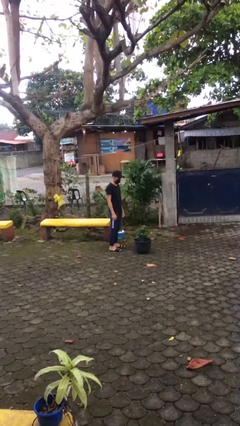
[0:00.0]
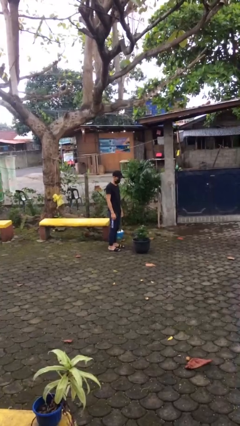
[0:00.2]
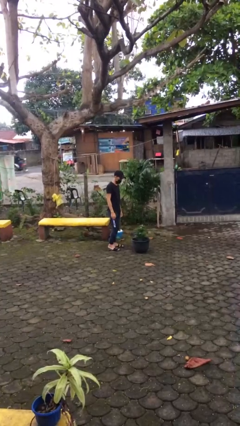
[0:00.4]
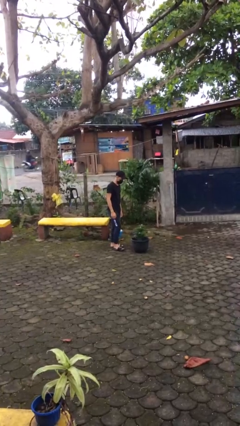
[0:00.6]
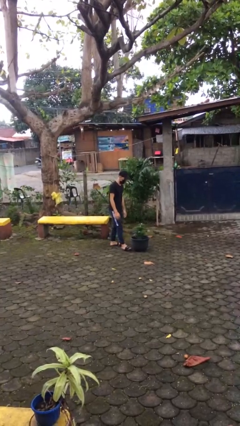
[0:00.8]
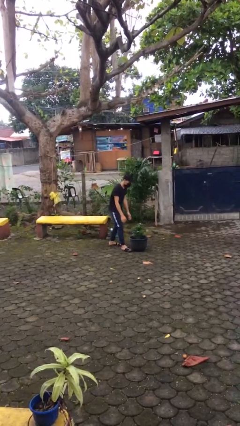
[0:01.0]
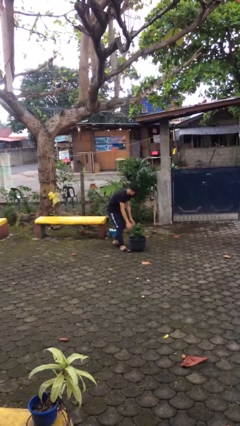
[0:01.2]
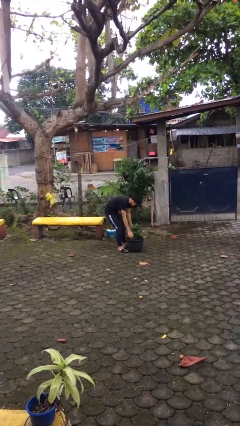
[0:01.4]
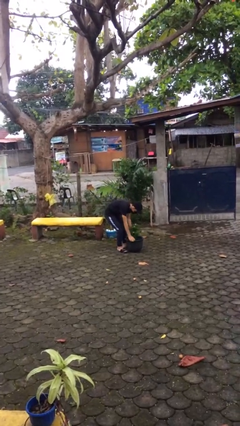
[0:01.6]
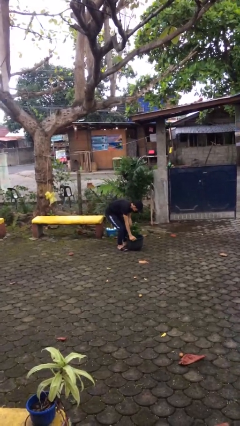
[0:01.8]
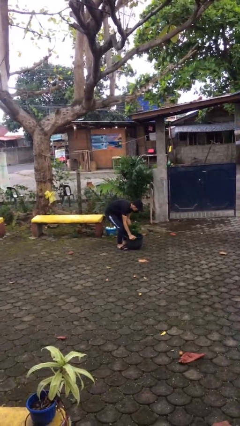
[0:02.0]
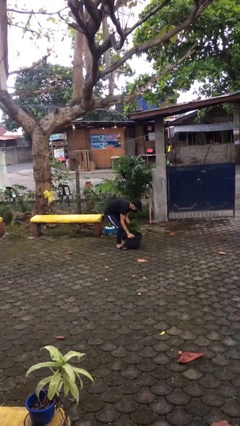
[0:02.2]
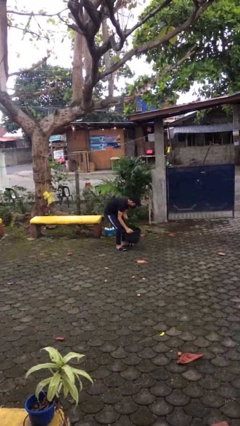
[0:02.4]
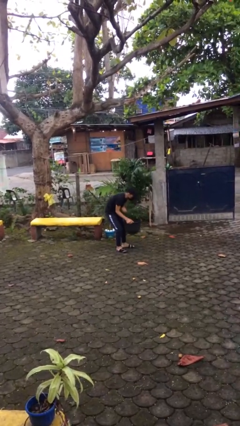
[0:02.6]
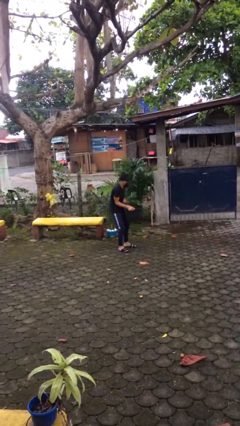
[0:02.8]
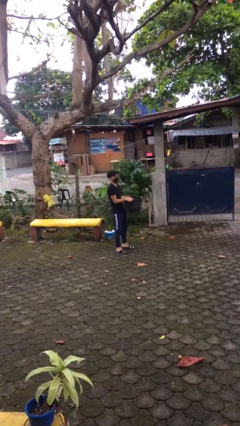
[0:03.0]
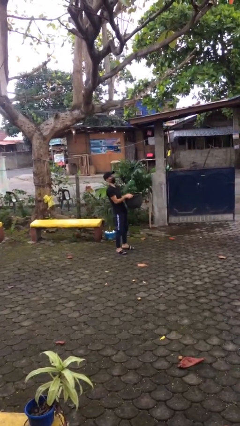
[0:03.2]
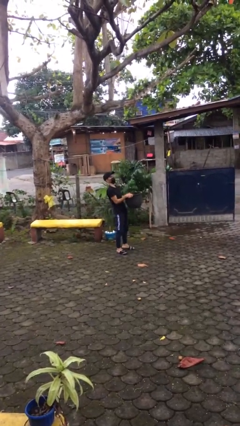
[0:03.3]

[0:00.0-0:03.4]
person picks up object from floor

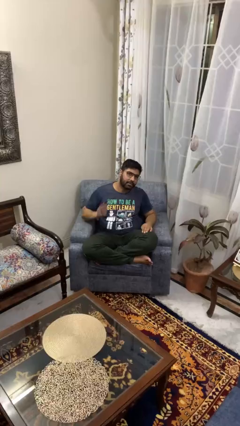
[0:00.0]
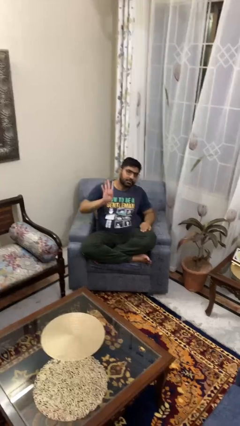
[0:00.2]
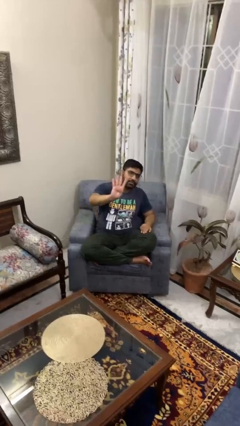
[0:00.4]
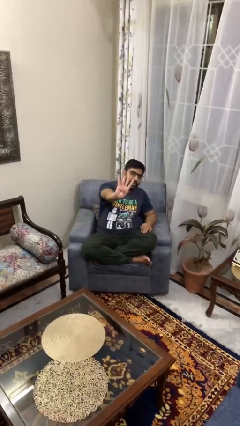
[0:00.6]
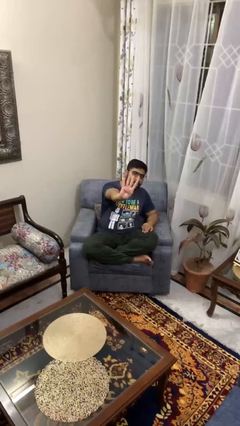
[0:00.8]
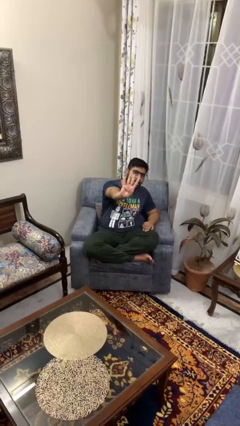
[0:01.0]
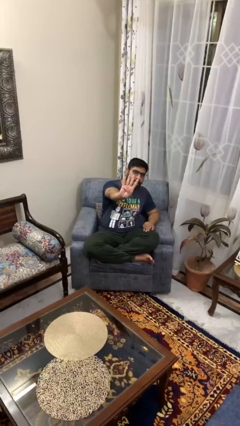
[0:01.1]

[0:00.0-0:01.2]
person gestures number four

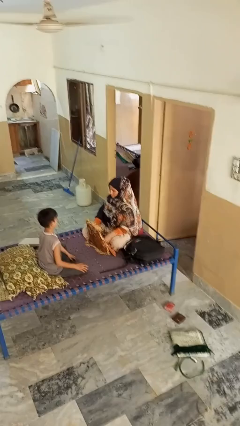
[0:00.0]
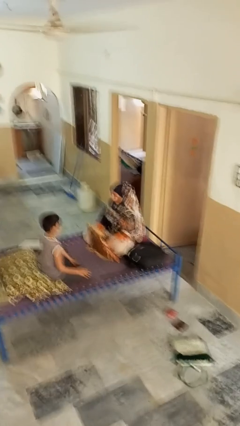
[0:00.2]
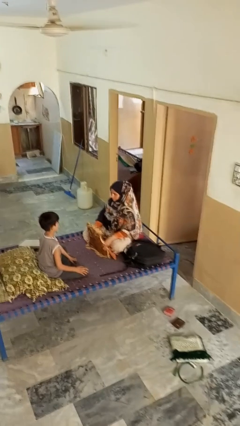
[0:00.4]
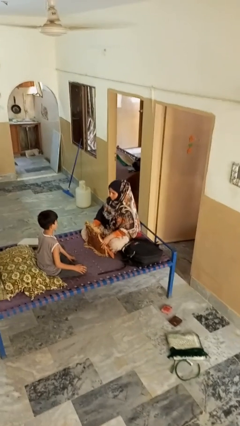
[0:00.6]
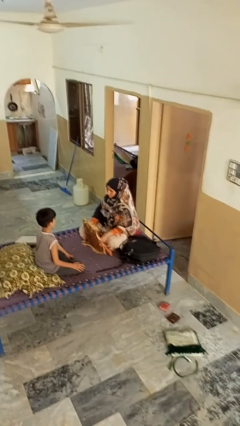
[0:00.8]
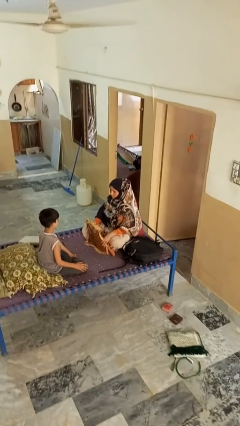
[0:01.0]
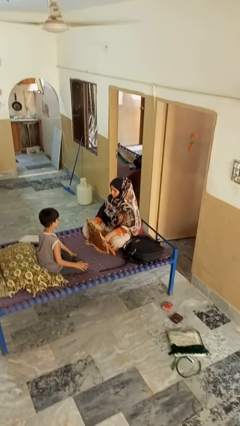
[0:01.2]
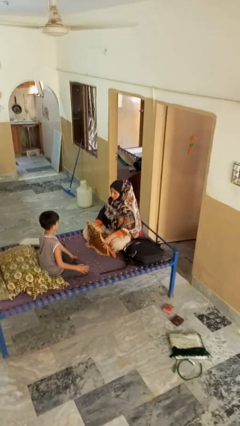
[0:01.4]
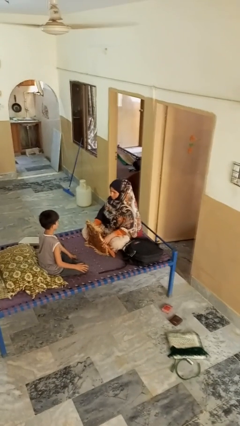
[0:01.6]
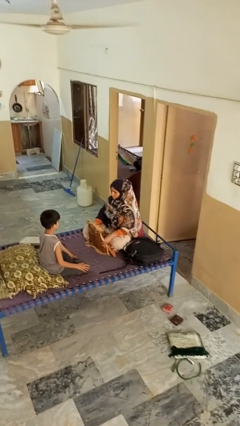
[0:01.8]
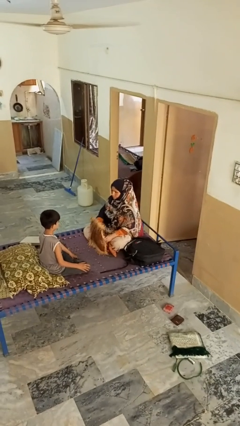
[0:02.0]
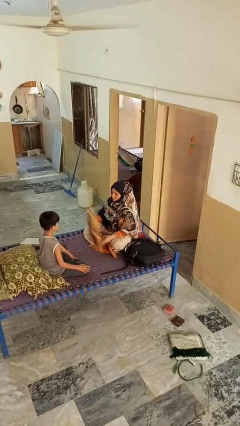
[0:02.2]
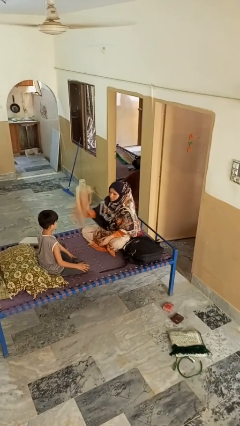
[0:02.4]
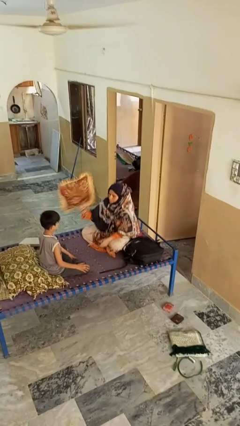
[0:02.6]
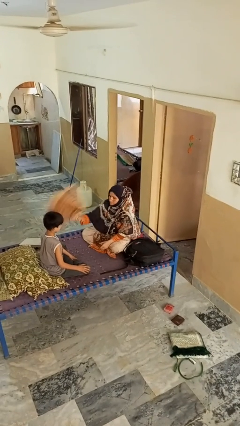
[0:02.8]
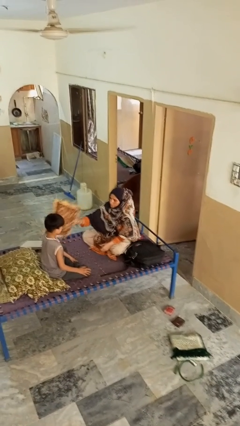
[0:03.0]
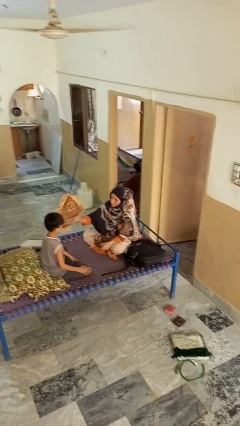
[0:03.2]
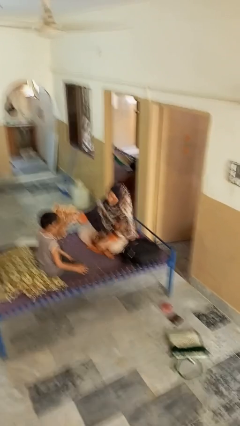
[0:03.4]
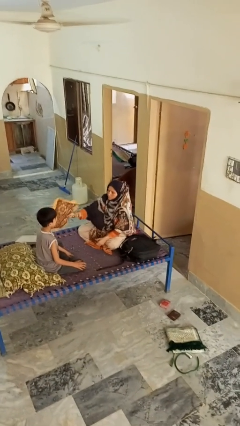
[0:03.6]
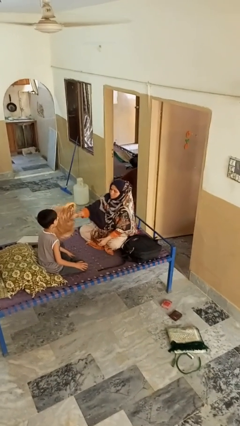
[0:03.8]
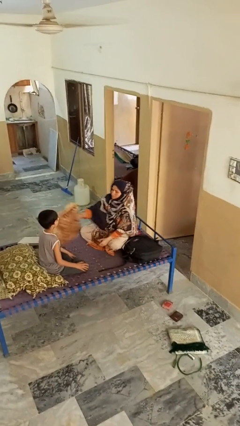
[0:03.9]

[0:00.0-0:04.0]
person hits person with pillow

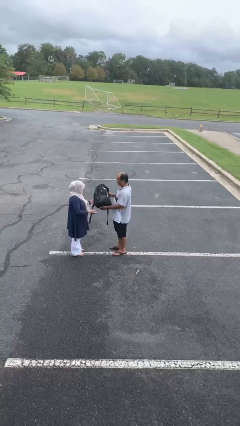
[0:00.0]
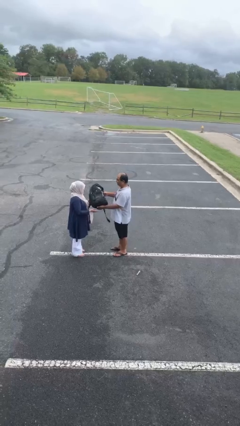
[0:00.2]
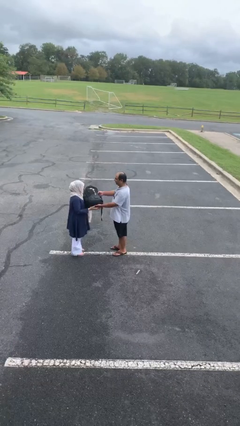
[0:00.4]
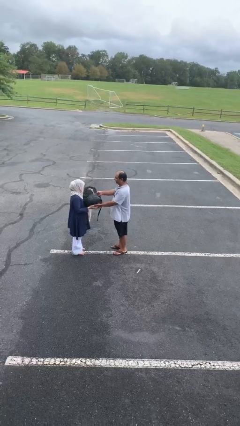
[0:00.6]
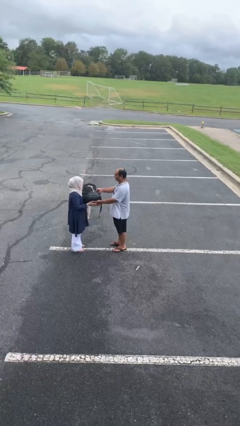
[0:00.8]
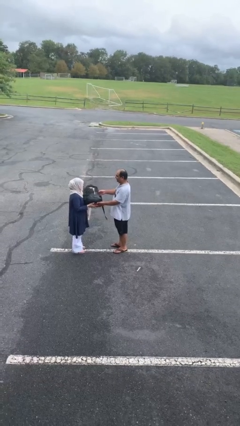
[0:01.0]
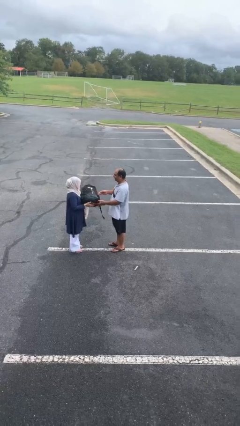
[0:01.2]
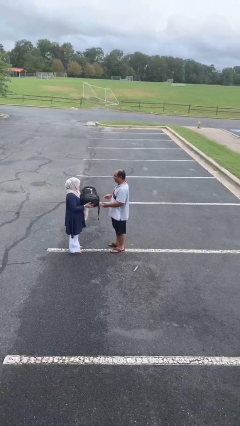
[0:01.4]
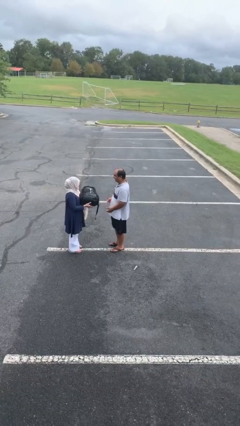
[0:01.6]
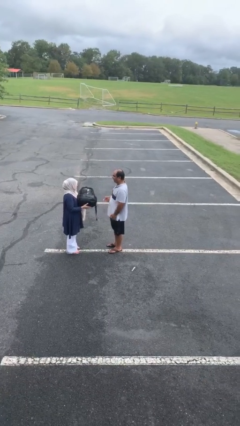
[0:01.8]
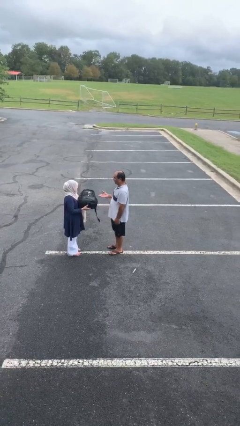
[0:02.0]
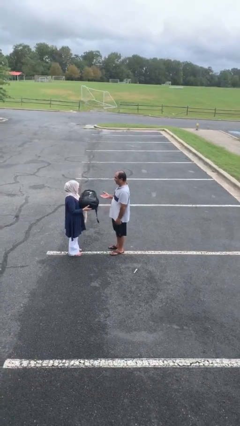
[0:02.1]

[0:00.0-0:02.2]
person transfers object to person

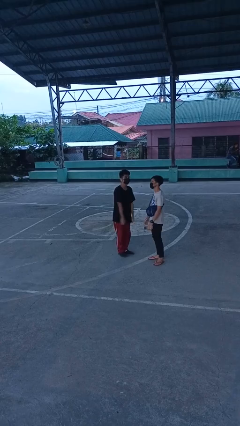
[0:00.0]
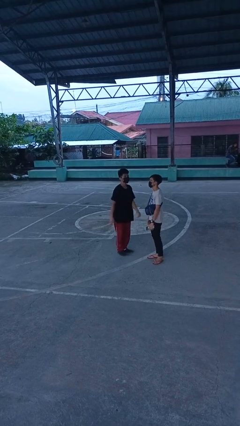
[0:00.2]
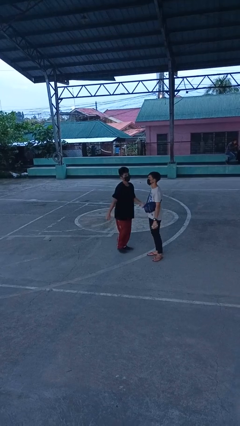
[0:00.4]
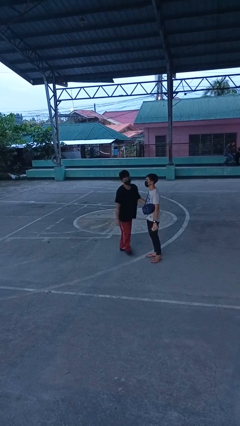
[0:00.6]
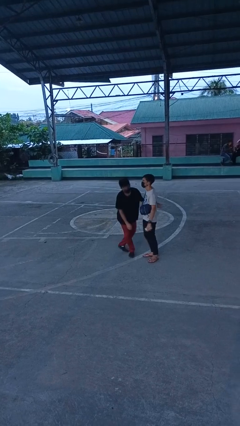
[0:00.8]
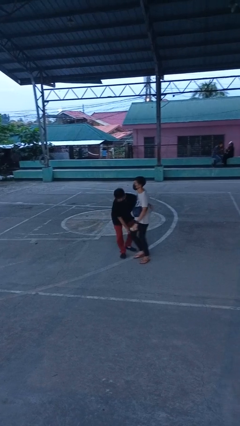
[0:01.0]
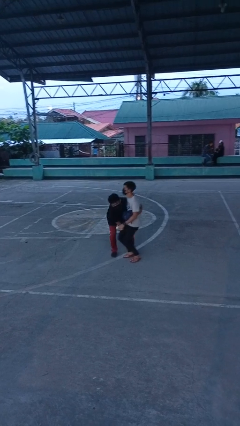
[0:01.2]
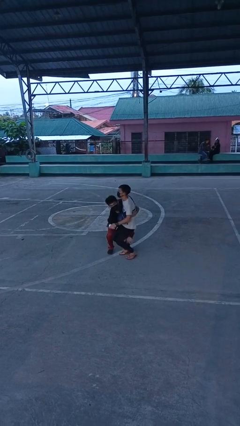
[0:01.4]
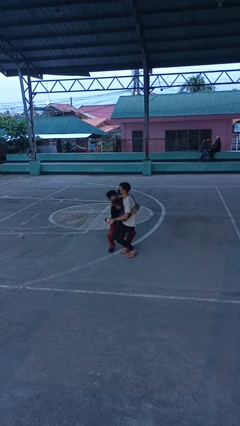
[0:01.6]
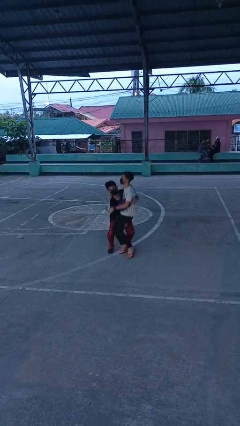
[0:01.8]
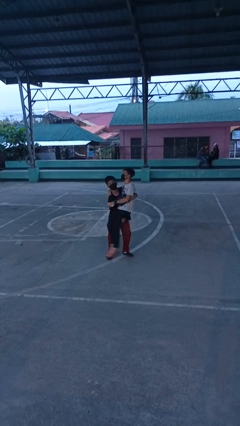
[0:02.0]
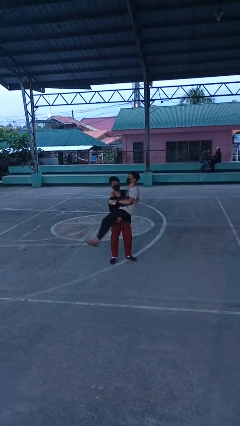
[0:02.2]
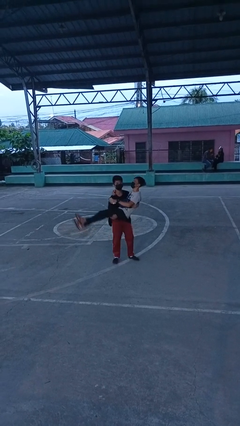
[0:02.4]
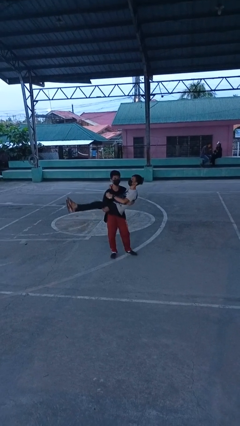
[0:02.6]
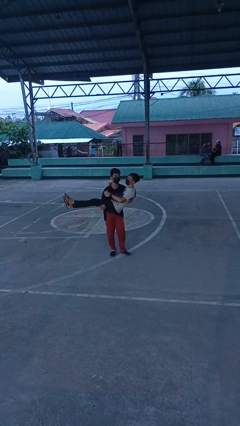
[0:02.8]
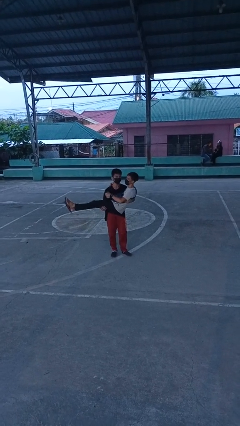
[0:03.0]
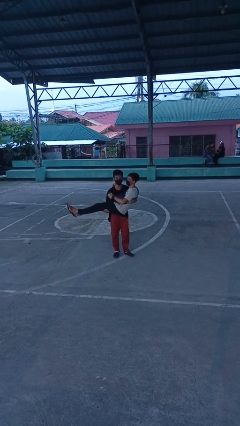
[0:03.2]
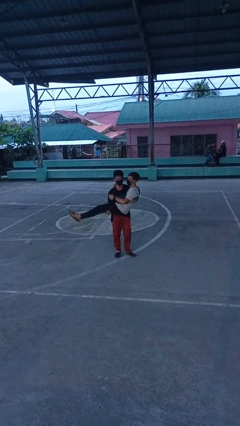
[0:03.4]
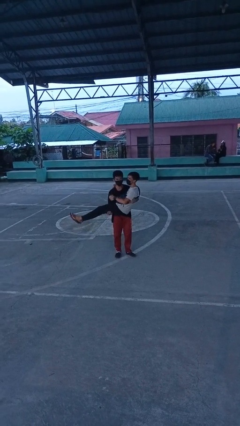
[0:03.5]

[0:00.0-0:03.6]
person picks up person

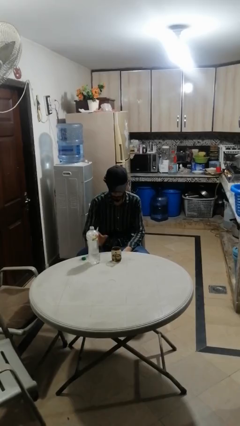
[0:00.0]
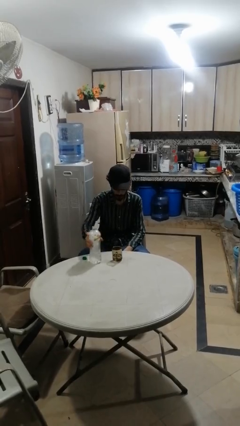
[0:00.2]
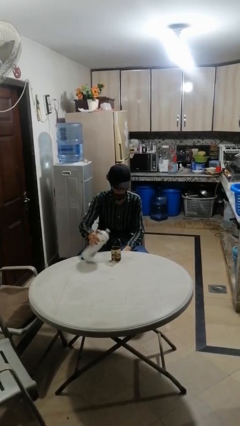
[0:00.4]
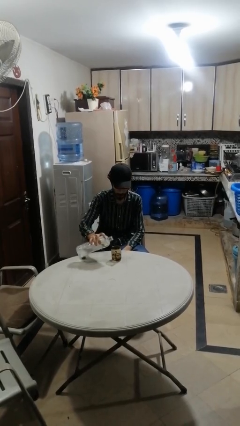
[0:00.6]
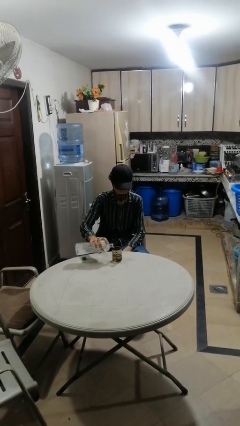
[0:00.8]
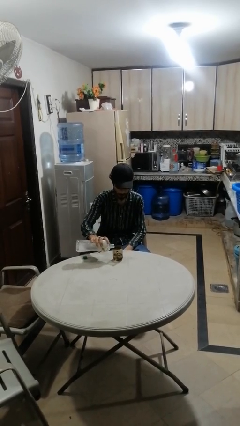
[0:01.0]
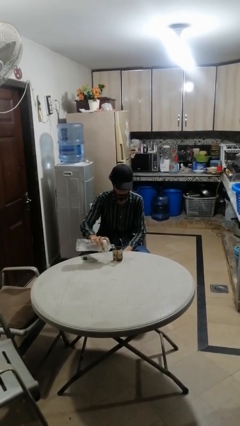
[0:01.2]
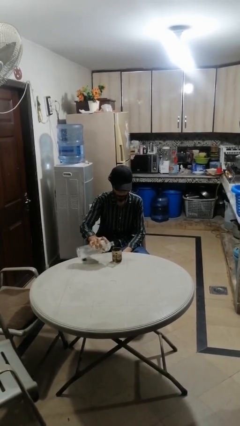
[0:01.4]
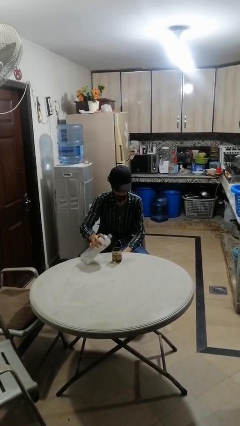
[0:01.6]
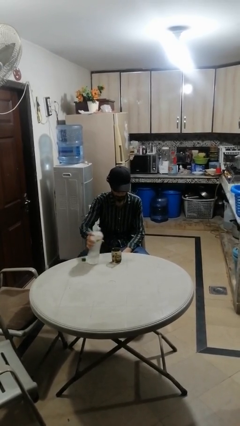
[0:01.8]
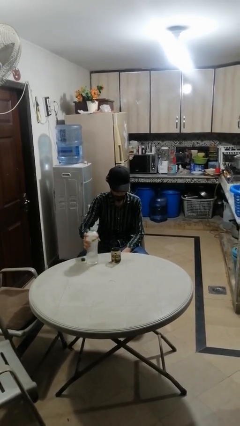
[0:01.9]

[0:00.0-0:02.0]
person pours liquid into cup

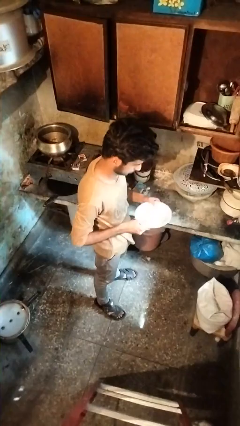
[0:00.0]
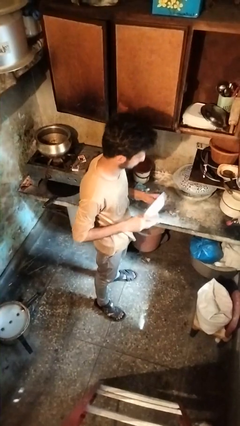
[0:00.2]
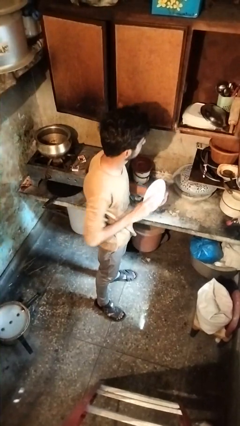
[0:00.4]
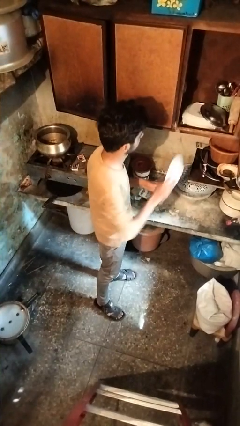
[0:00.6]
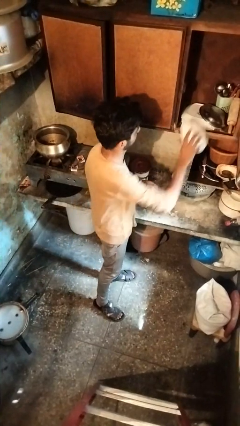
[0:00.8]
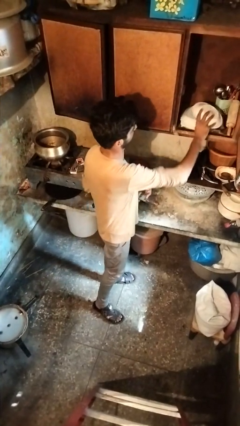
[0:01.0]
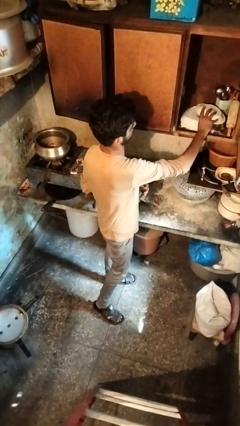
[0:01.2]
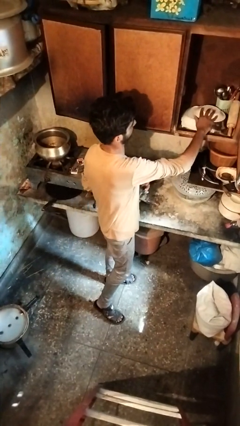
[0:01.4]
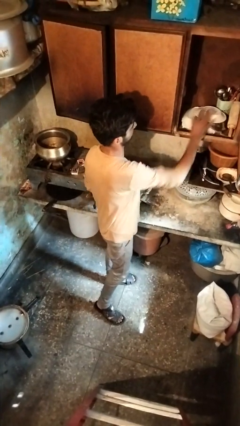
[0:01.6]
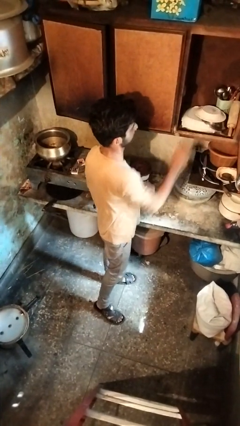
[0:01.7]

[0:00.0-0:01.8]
person puts down object into cabinet
